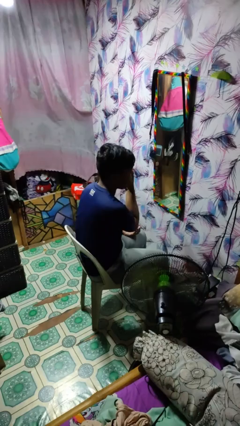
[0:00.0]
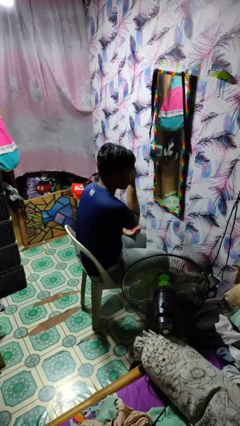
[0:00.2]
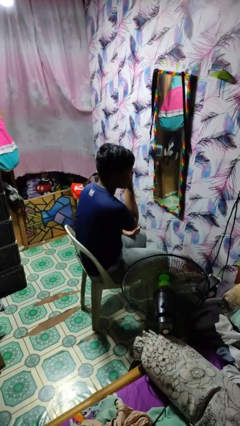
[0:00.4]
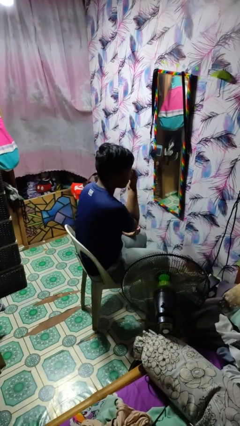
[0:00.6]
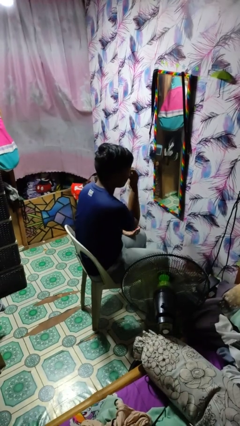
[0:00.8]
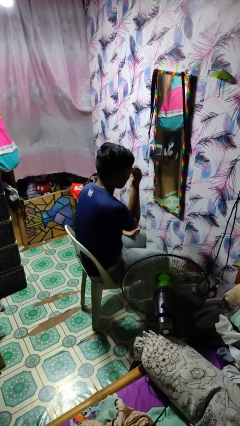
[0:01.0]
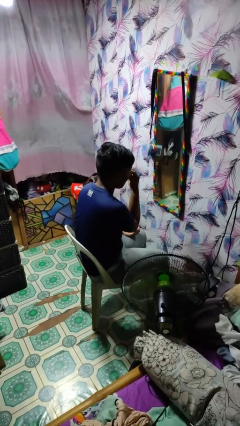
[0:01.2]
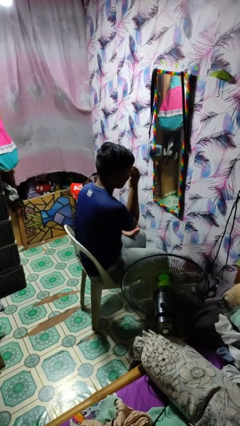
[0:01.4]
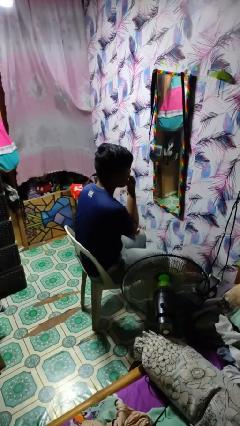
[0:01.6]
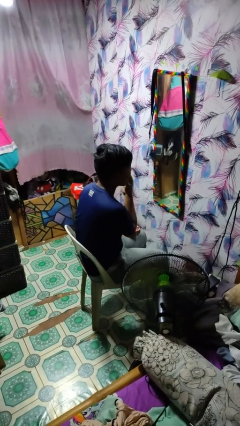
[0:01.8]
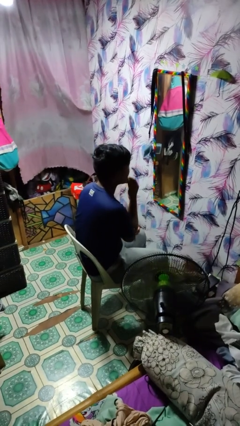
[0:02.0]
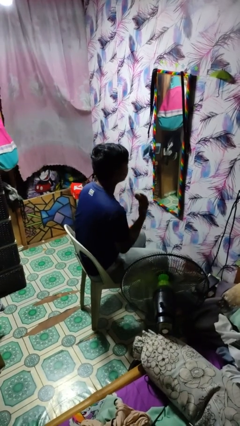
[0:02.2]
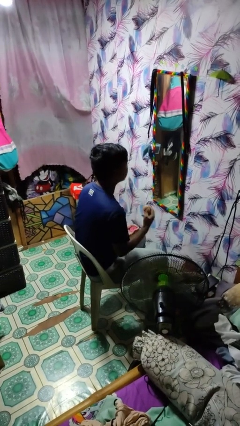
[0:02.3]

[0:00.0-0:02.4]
person applies foundation makeup

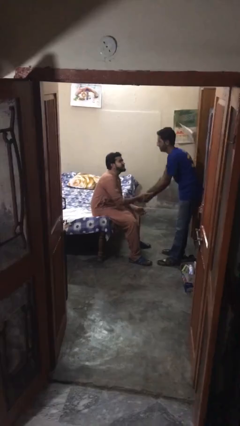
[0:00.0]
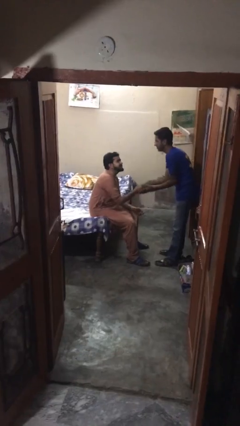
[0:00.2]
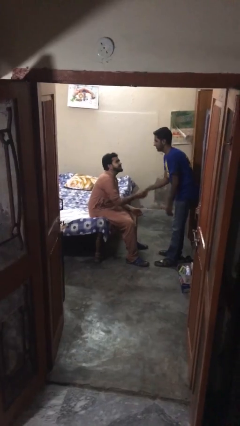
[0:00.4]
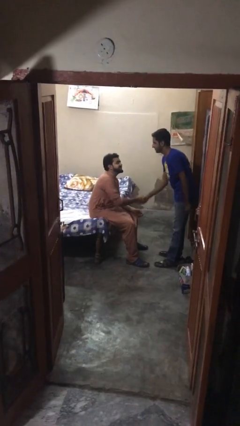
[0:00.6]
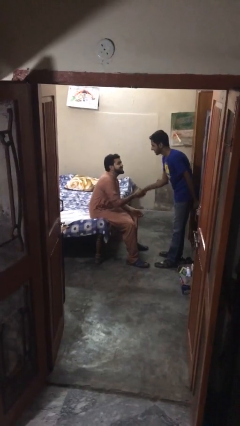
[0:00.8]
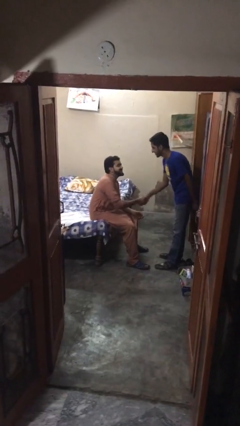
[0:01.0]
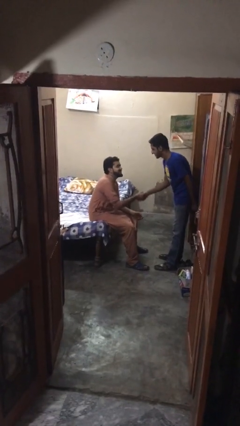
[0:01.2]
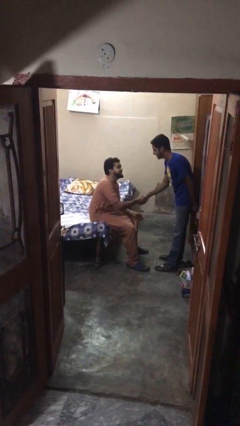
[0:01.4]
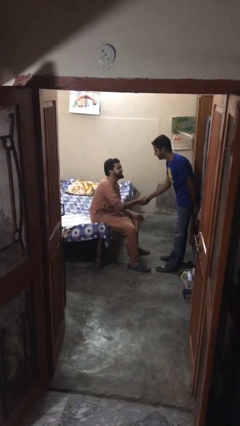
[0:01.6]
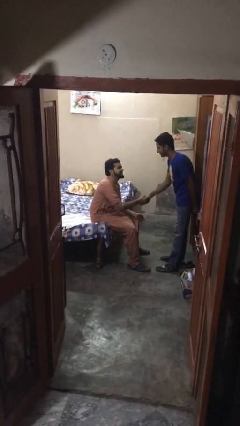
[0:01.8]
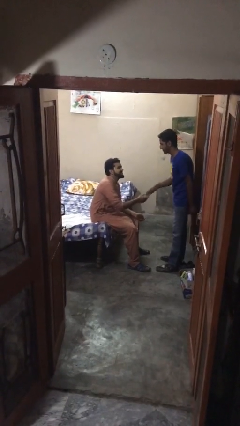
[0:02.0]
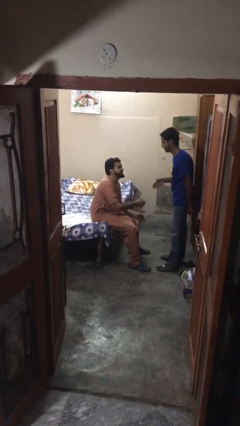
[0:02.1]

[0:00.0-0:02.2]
person shakes hand

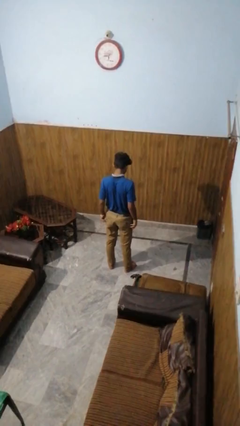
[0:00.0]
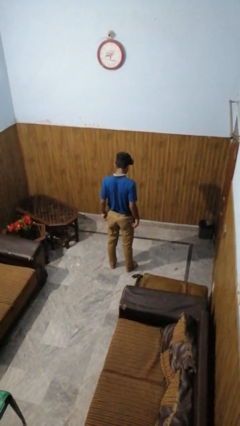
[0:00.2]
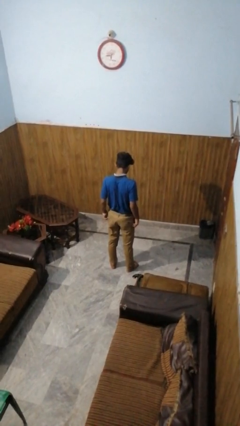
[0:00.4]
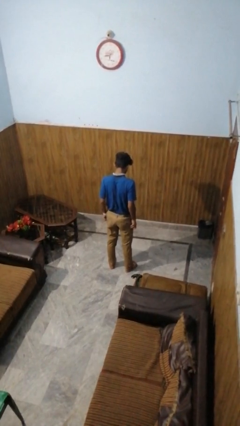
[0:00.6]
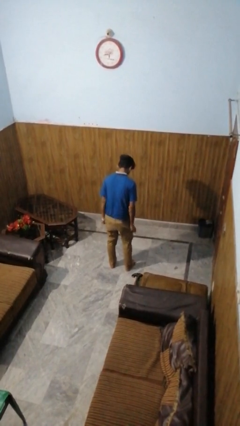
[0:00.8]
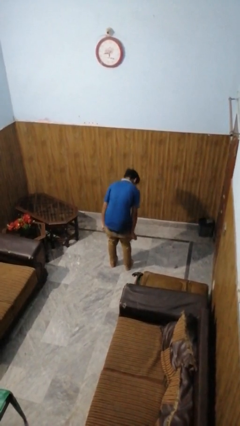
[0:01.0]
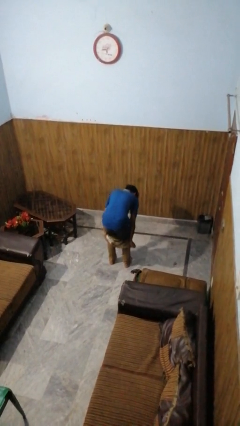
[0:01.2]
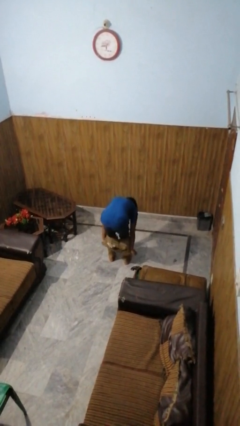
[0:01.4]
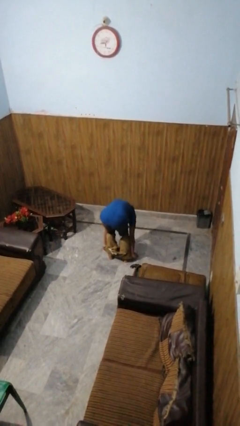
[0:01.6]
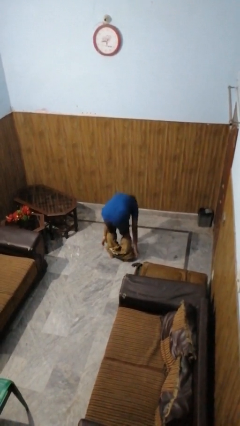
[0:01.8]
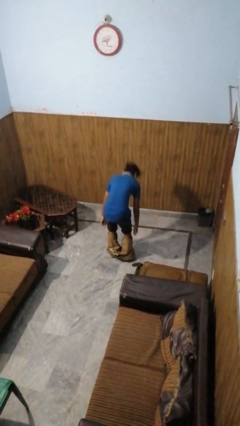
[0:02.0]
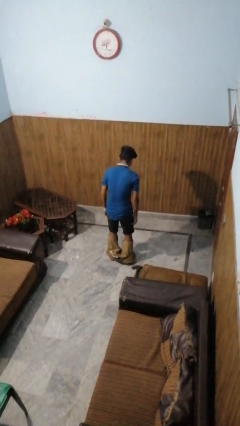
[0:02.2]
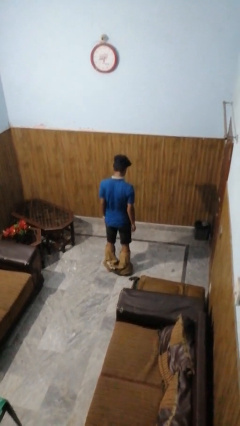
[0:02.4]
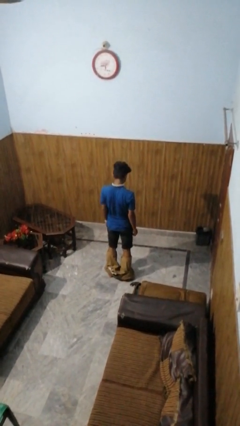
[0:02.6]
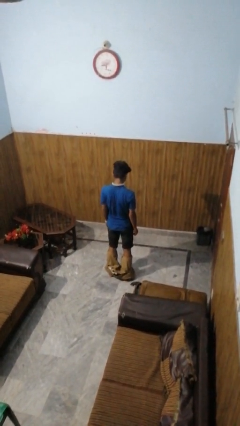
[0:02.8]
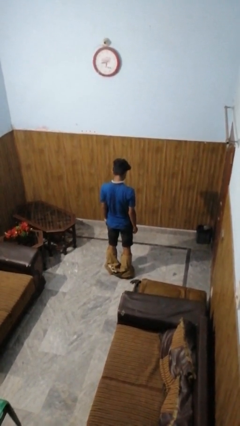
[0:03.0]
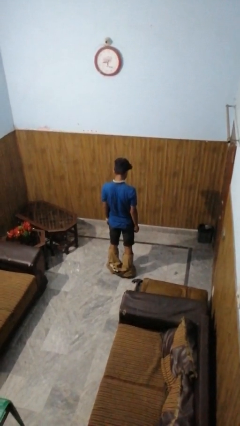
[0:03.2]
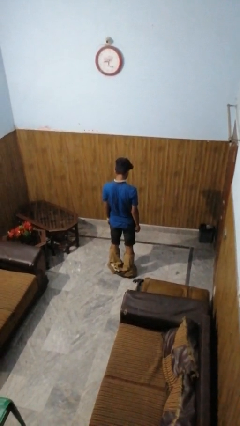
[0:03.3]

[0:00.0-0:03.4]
person takes off pants

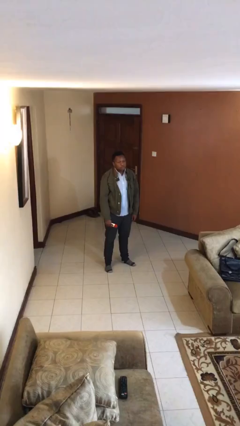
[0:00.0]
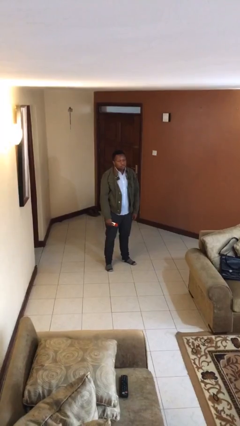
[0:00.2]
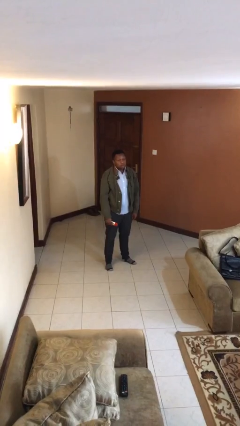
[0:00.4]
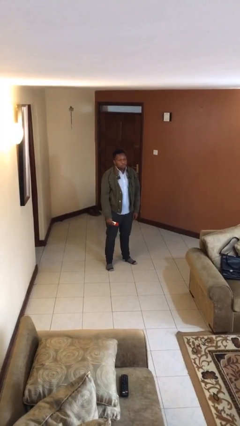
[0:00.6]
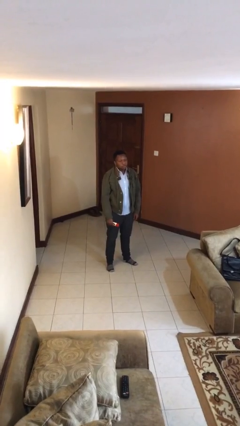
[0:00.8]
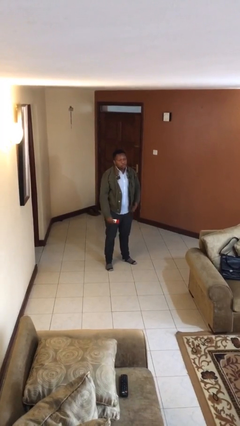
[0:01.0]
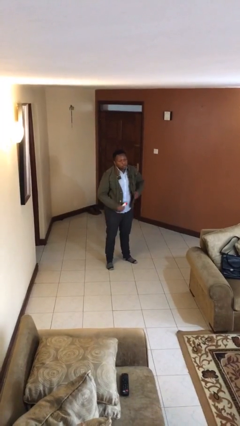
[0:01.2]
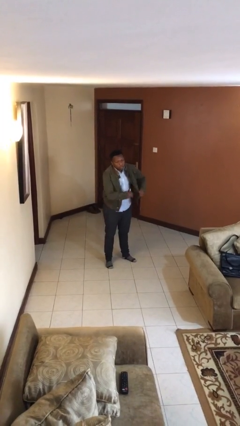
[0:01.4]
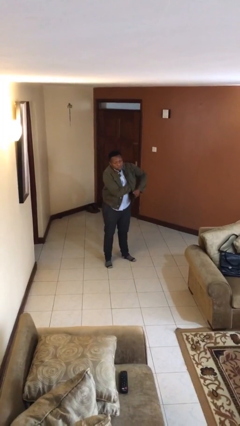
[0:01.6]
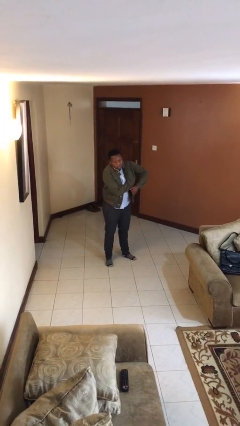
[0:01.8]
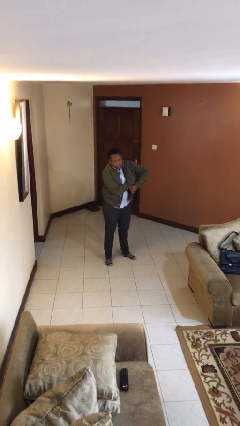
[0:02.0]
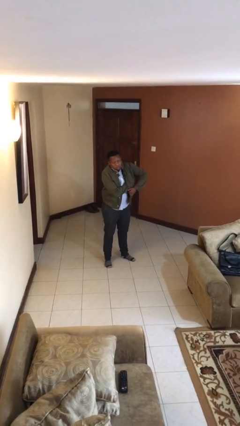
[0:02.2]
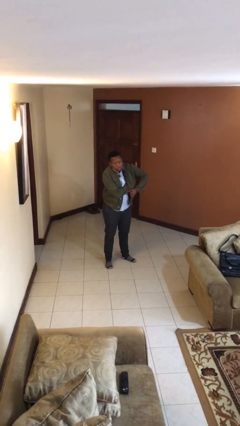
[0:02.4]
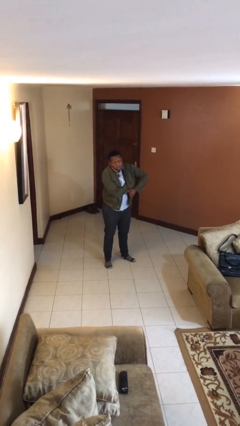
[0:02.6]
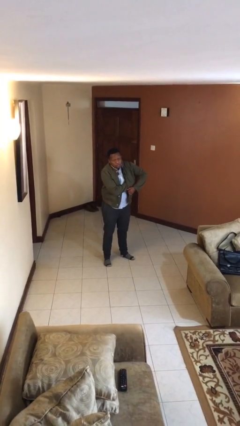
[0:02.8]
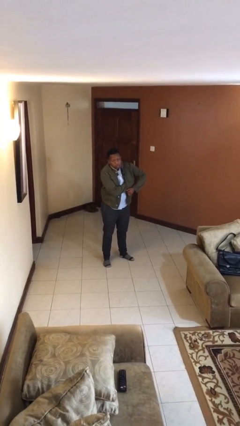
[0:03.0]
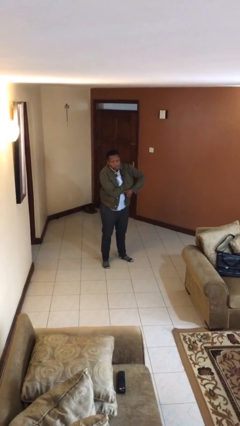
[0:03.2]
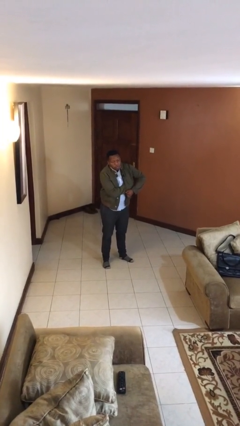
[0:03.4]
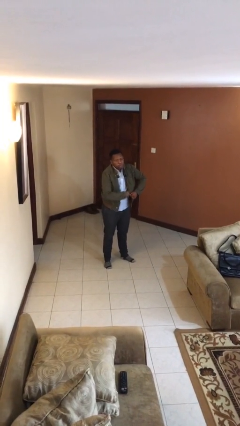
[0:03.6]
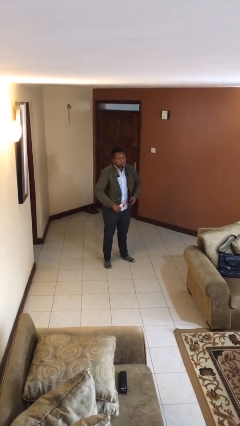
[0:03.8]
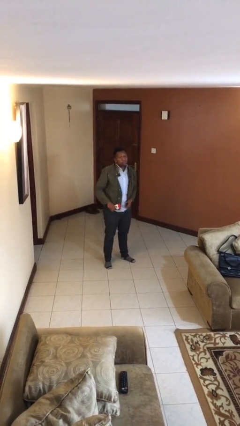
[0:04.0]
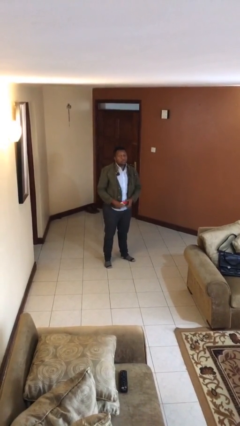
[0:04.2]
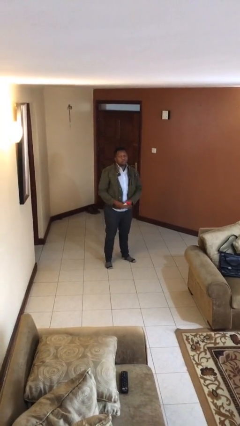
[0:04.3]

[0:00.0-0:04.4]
person applies deodorant

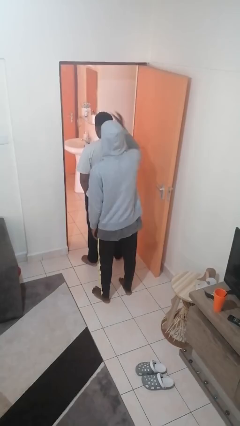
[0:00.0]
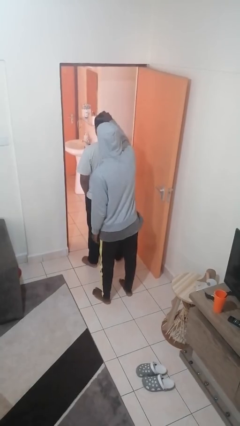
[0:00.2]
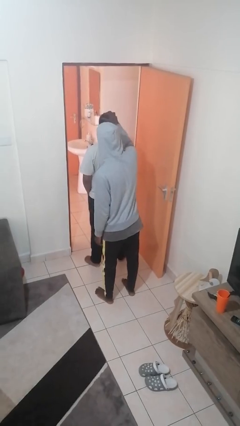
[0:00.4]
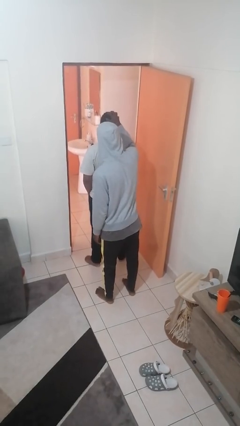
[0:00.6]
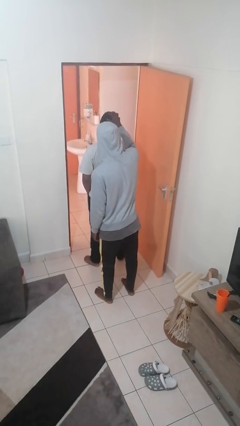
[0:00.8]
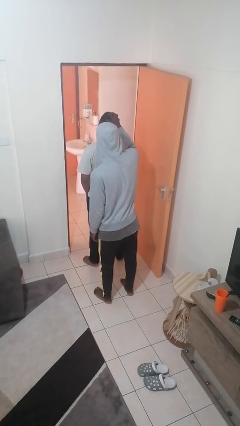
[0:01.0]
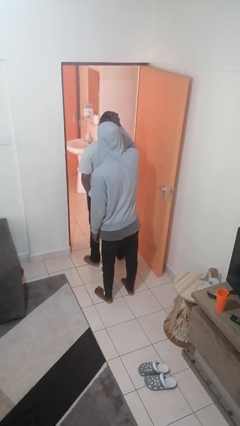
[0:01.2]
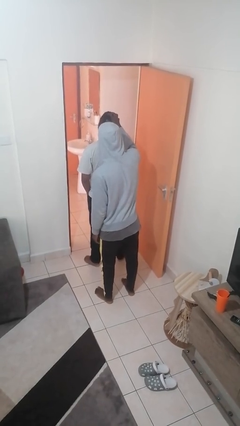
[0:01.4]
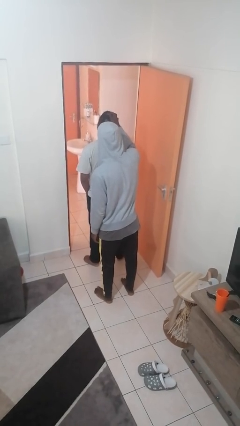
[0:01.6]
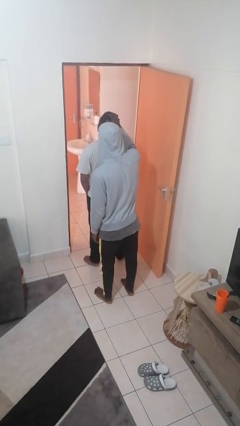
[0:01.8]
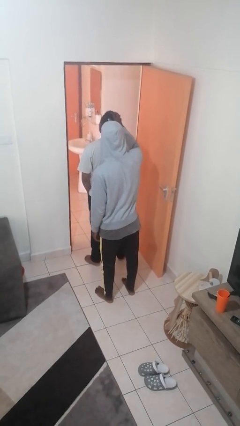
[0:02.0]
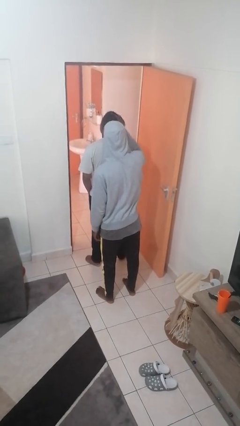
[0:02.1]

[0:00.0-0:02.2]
person grabs person by hair

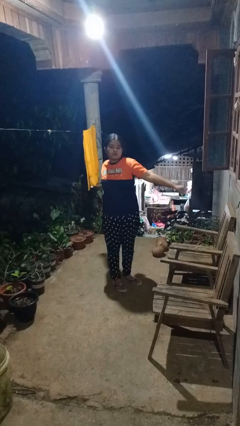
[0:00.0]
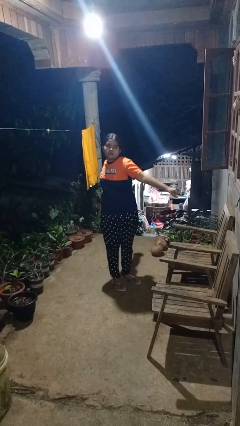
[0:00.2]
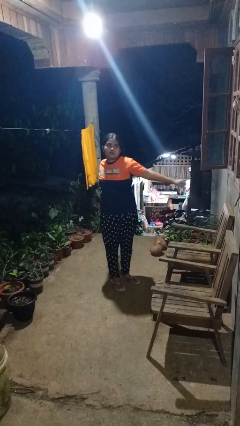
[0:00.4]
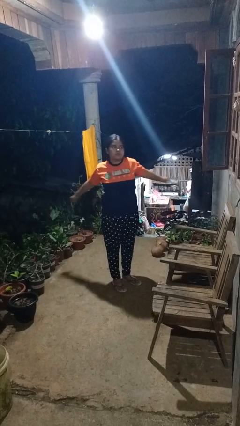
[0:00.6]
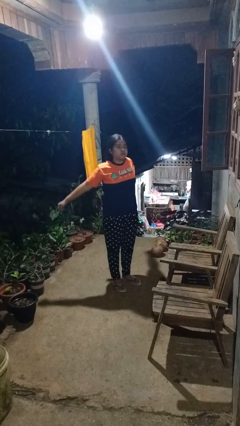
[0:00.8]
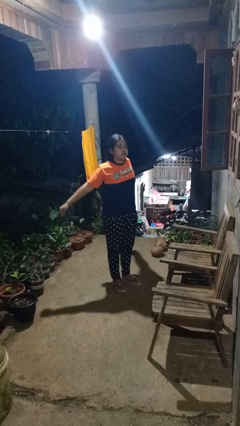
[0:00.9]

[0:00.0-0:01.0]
person stretches arms to side

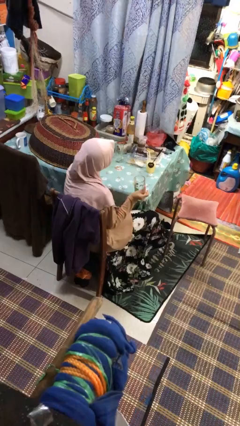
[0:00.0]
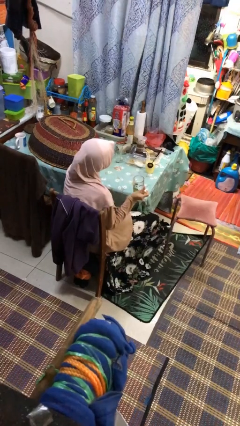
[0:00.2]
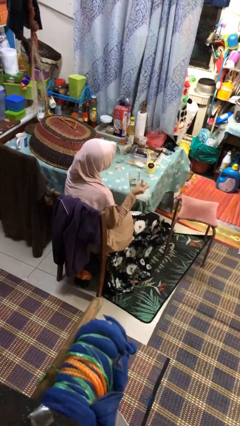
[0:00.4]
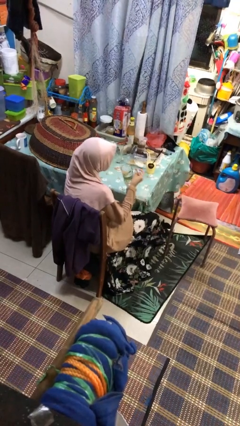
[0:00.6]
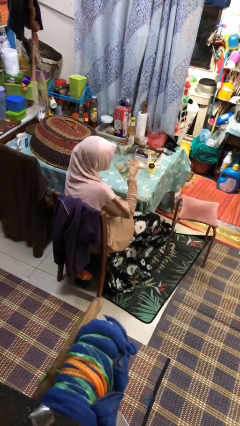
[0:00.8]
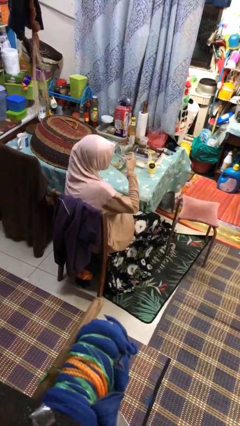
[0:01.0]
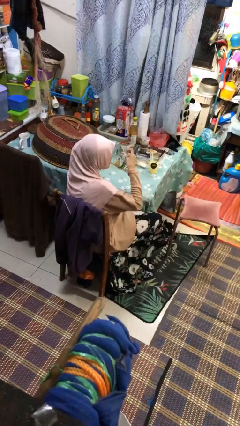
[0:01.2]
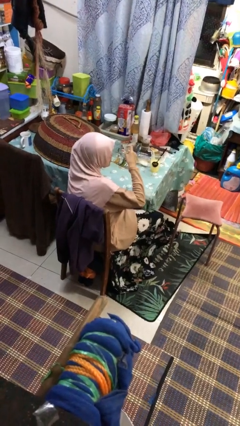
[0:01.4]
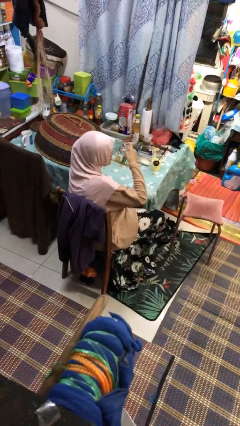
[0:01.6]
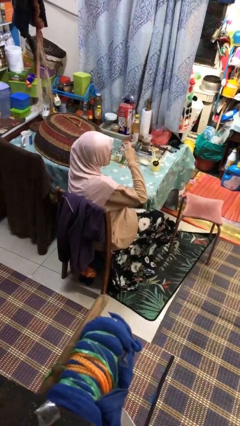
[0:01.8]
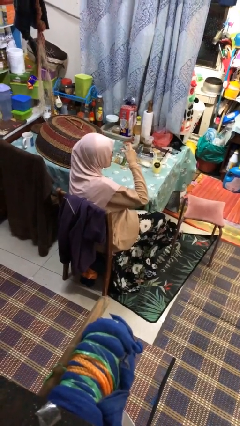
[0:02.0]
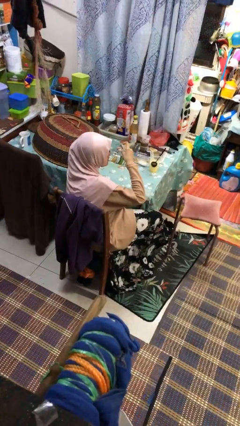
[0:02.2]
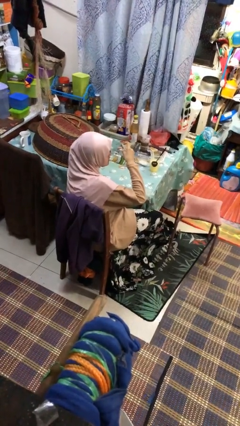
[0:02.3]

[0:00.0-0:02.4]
person drinks from mug
